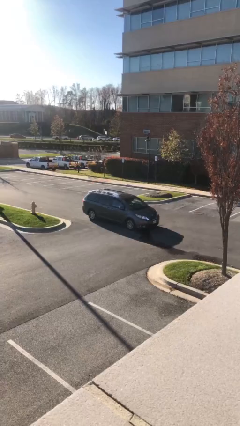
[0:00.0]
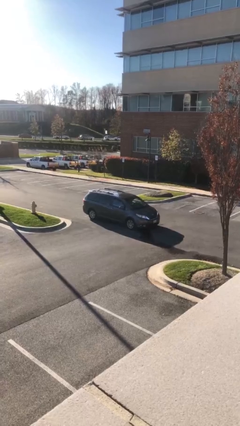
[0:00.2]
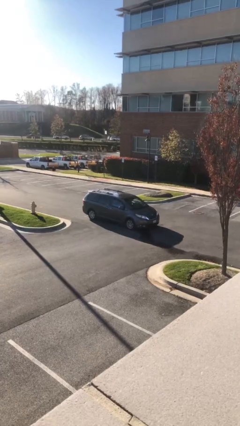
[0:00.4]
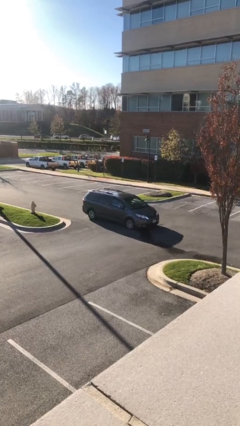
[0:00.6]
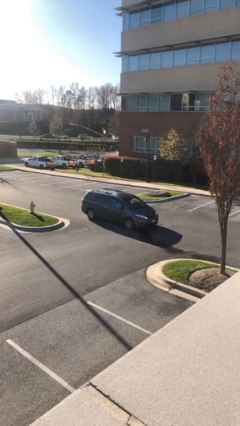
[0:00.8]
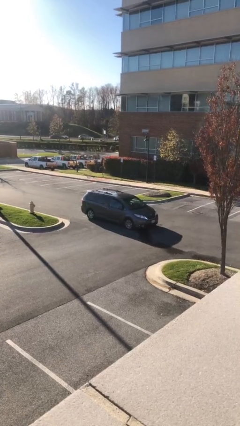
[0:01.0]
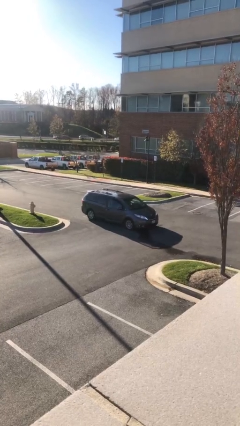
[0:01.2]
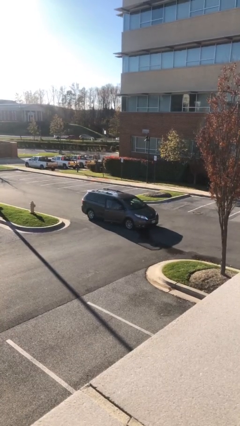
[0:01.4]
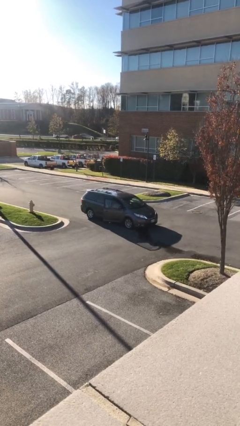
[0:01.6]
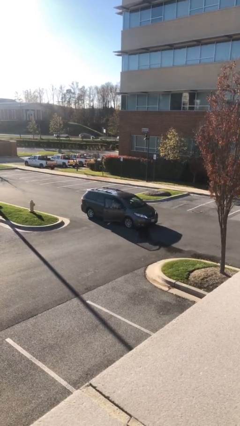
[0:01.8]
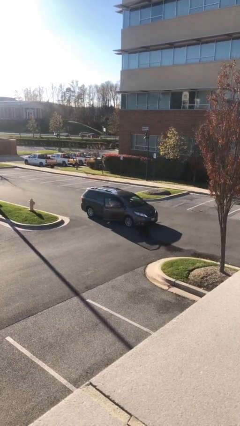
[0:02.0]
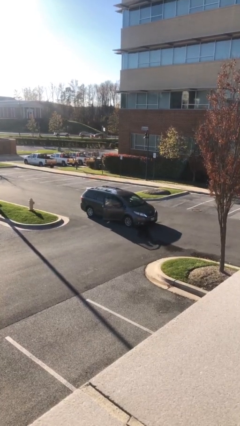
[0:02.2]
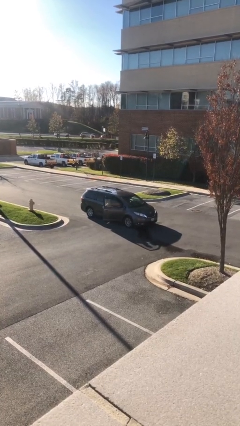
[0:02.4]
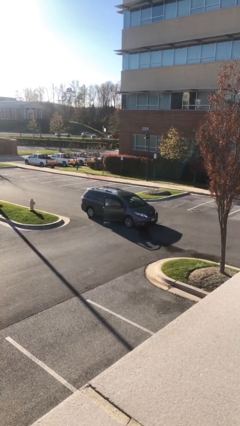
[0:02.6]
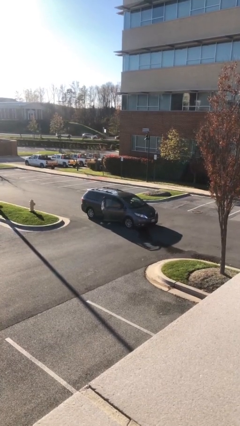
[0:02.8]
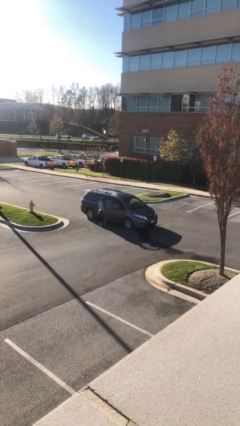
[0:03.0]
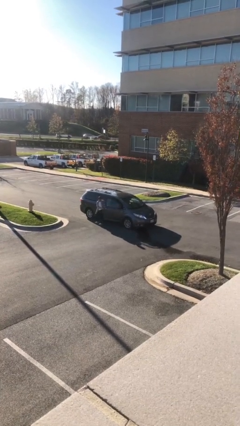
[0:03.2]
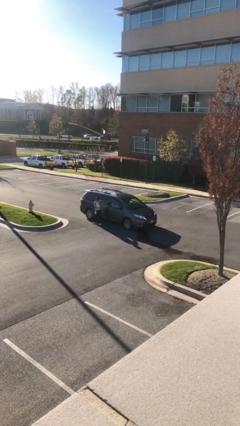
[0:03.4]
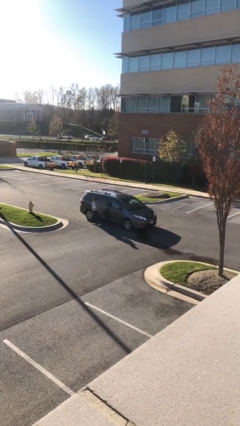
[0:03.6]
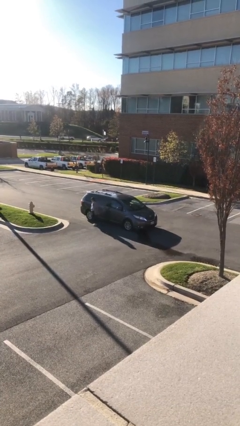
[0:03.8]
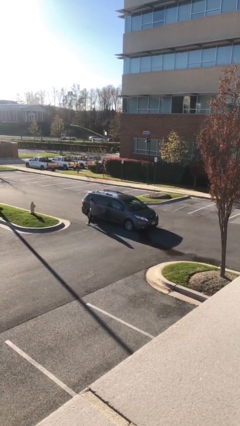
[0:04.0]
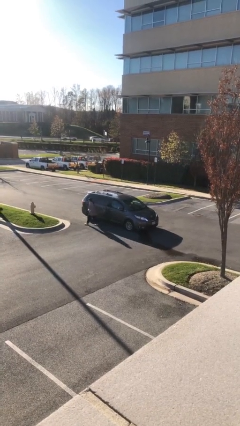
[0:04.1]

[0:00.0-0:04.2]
car drops off person

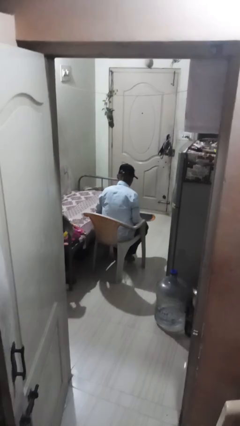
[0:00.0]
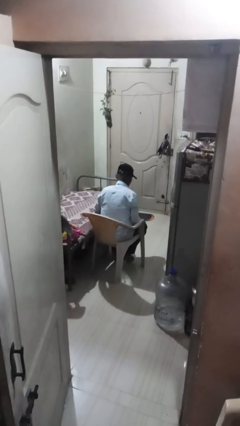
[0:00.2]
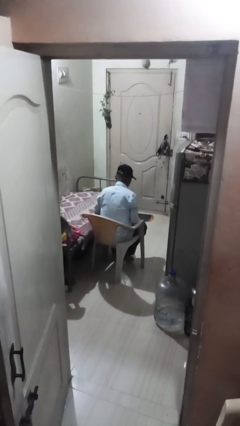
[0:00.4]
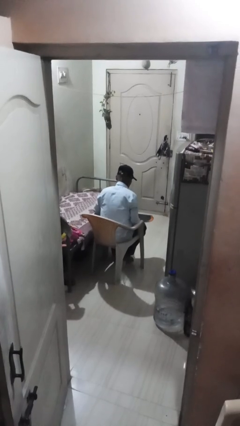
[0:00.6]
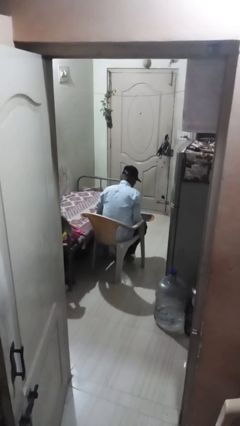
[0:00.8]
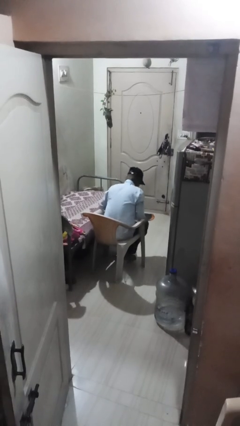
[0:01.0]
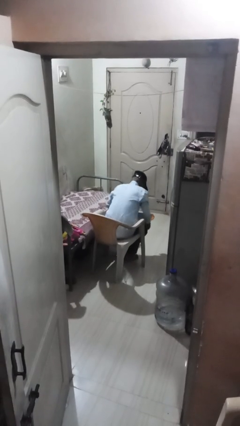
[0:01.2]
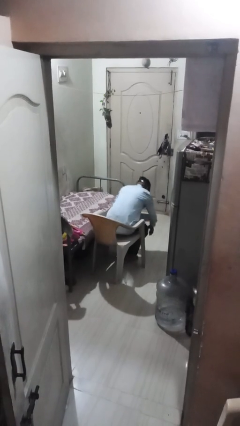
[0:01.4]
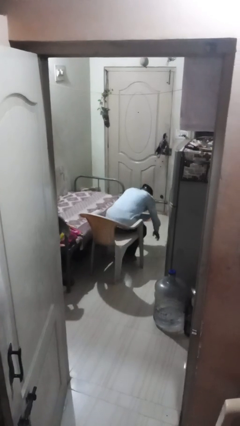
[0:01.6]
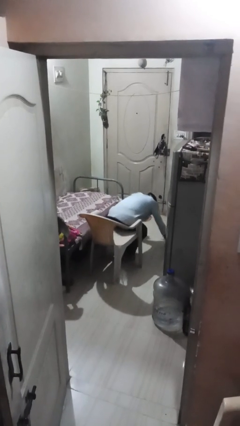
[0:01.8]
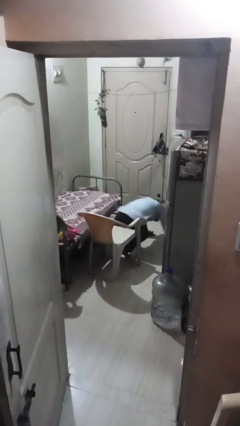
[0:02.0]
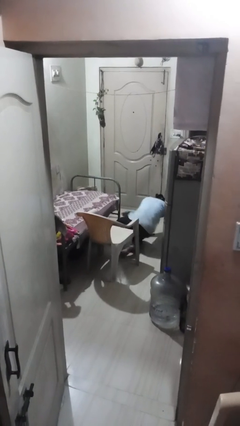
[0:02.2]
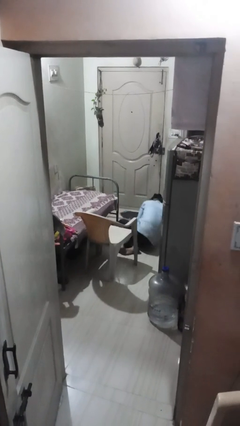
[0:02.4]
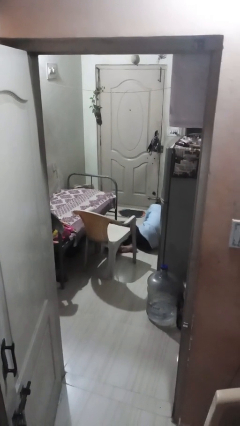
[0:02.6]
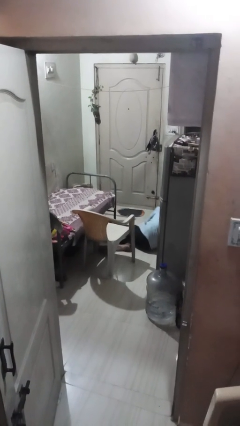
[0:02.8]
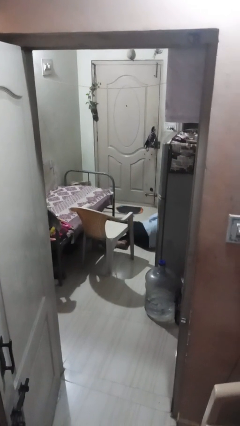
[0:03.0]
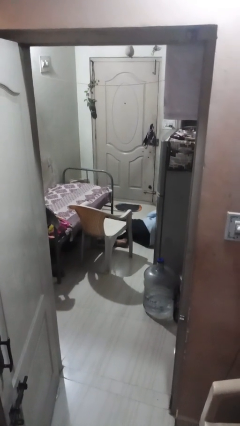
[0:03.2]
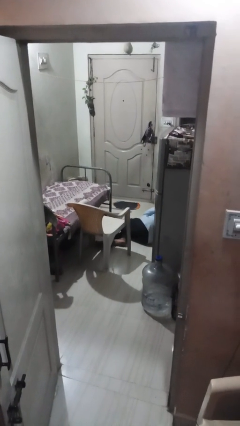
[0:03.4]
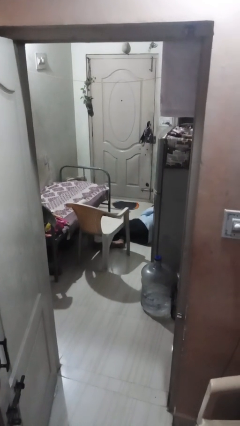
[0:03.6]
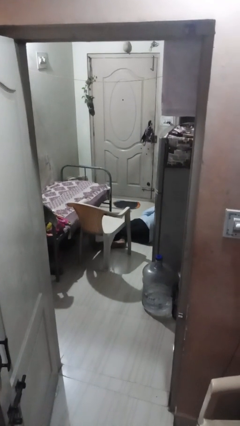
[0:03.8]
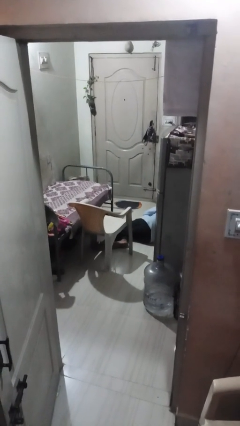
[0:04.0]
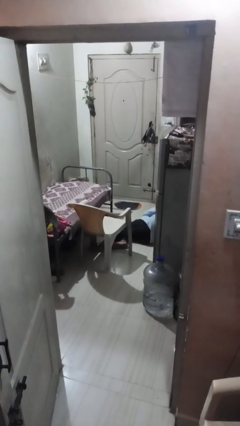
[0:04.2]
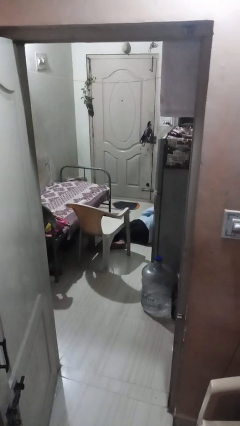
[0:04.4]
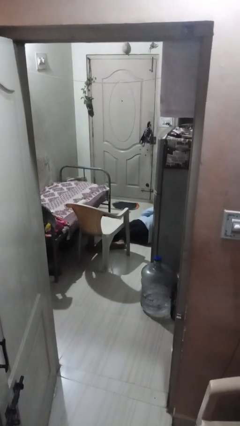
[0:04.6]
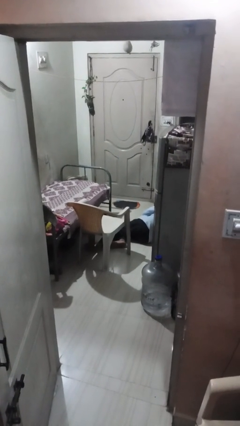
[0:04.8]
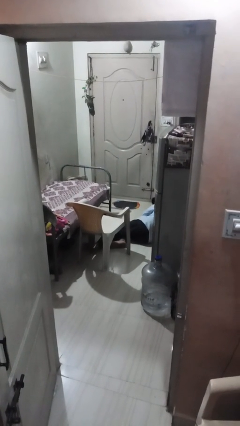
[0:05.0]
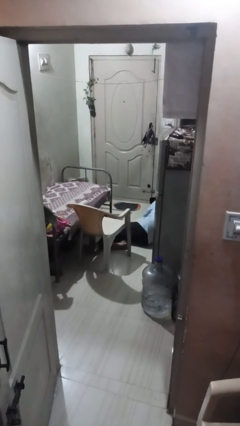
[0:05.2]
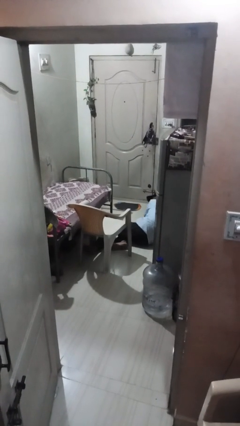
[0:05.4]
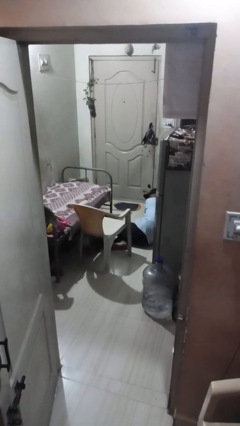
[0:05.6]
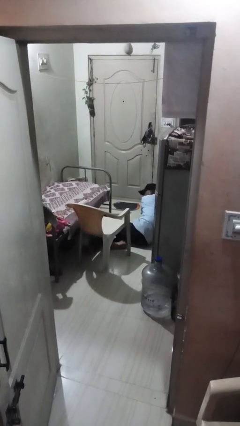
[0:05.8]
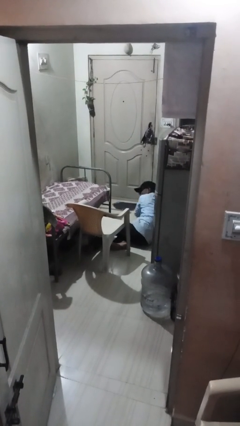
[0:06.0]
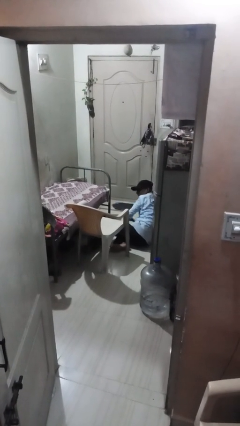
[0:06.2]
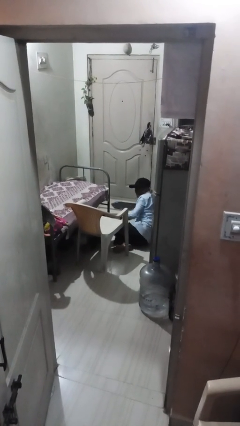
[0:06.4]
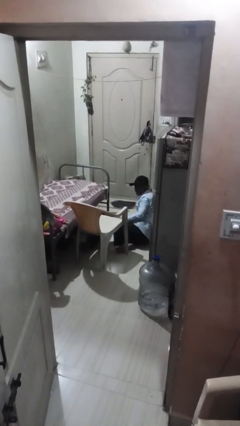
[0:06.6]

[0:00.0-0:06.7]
person falls from chair

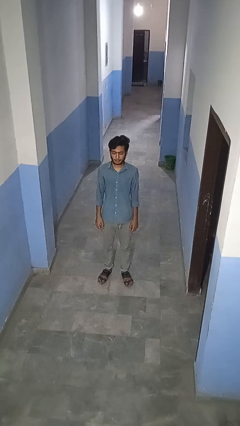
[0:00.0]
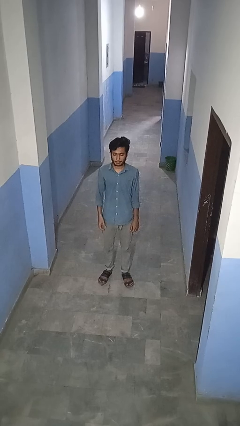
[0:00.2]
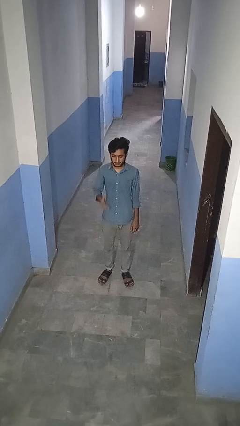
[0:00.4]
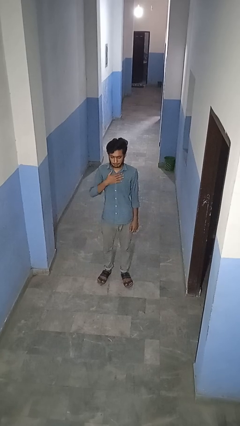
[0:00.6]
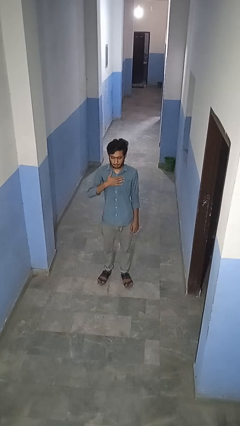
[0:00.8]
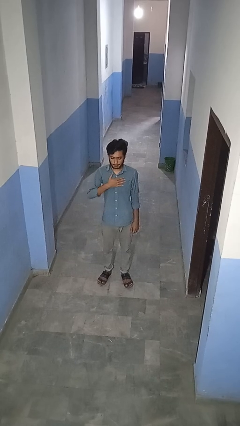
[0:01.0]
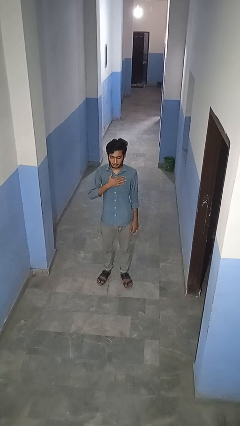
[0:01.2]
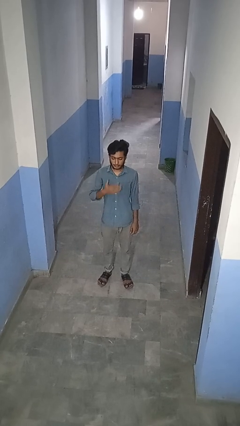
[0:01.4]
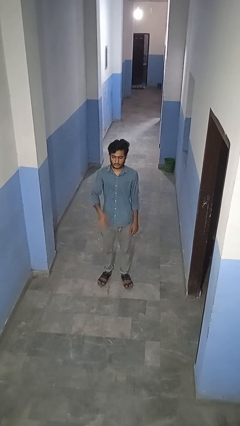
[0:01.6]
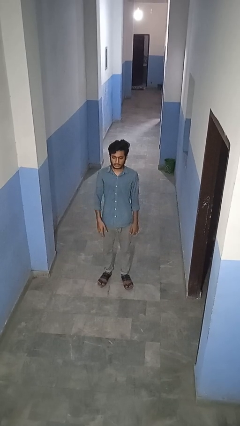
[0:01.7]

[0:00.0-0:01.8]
person drums on chest

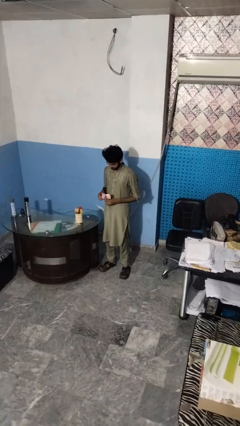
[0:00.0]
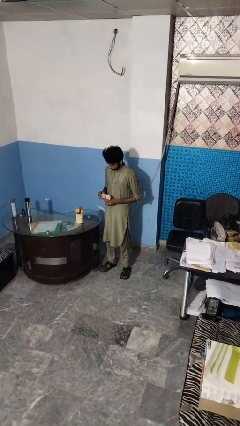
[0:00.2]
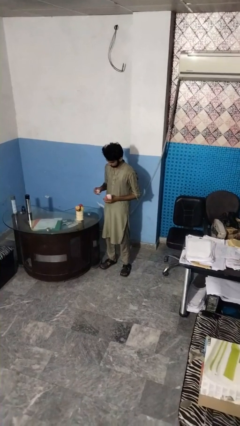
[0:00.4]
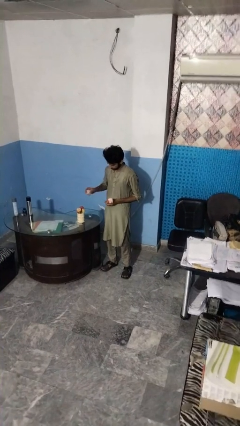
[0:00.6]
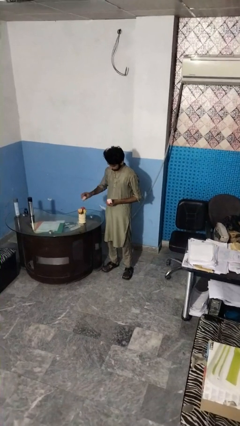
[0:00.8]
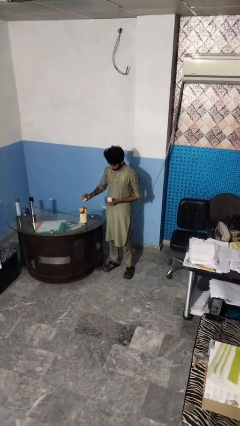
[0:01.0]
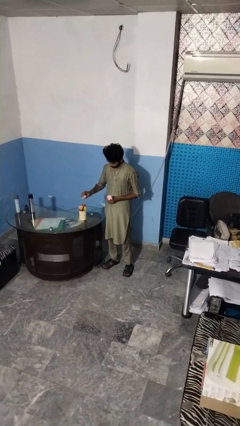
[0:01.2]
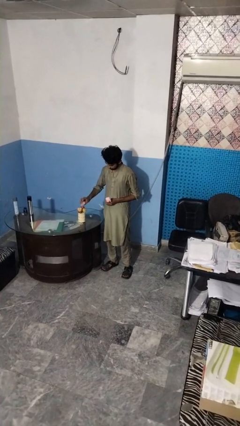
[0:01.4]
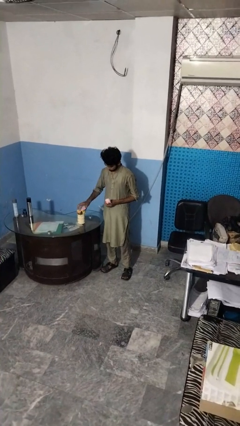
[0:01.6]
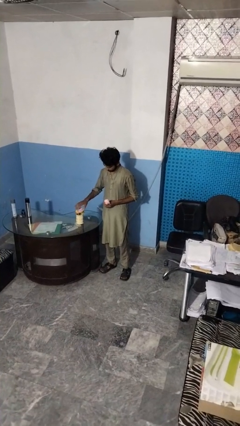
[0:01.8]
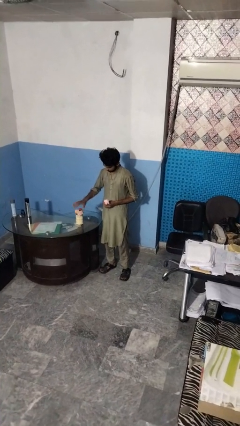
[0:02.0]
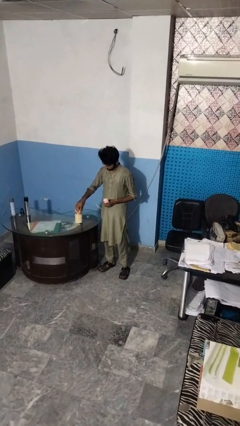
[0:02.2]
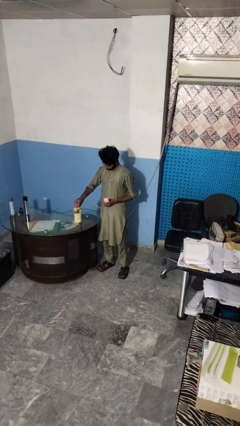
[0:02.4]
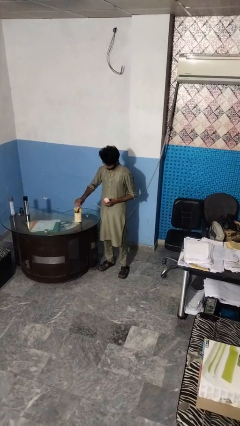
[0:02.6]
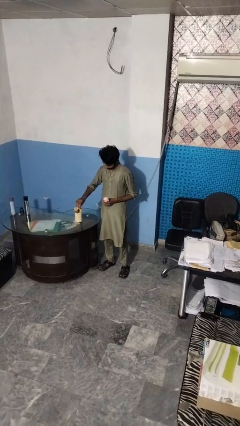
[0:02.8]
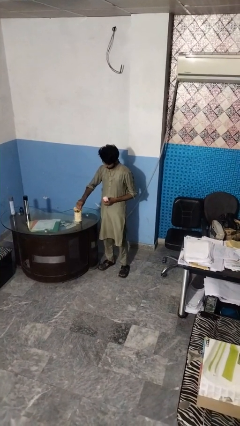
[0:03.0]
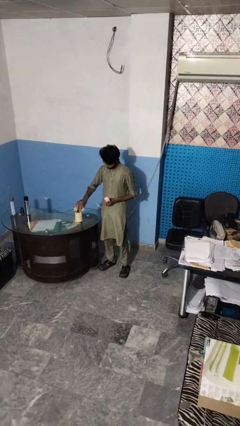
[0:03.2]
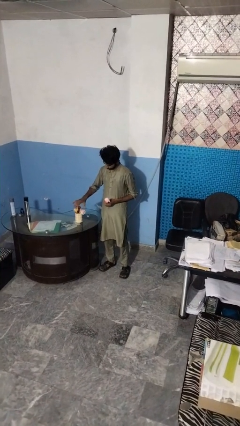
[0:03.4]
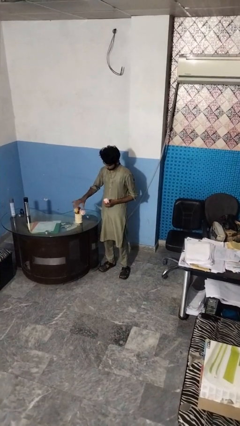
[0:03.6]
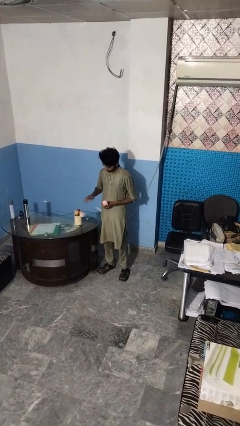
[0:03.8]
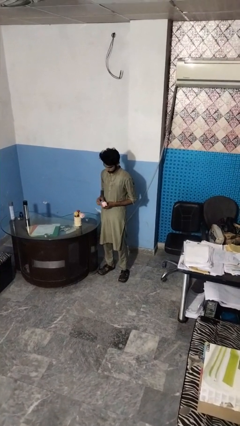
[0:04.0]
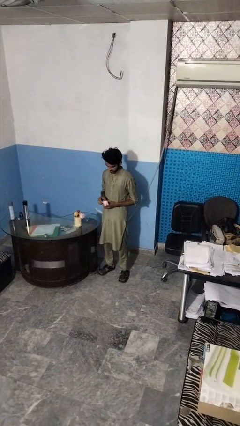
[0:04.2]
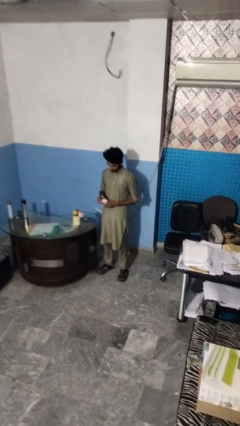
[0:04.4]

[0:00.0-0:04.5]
person arranges flowers in vase

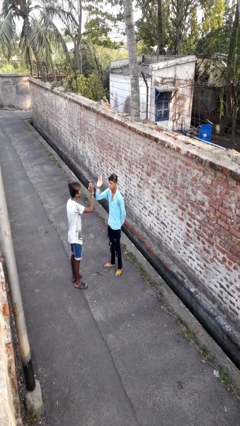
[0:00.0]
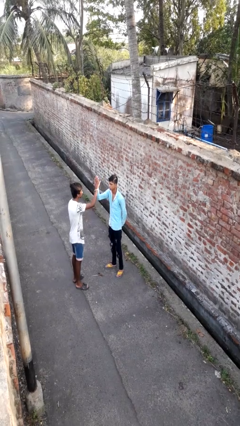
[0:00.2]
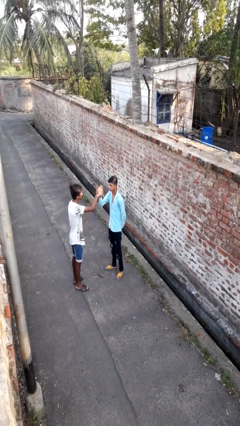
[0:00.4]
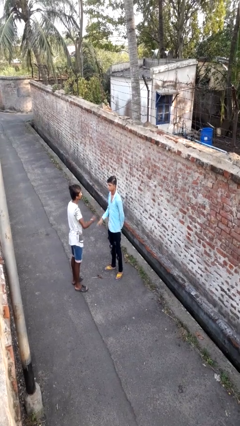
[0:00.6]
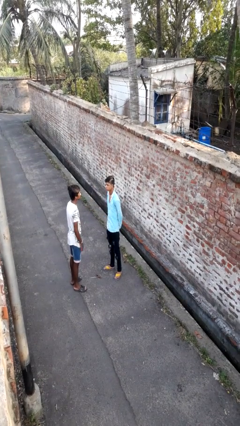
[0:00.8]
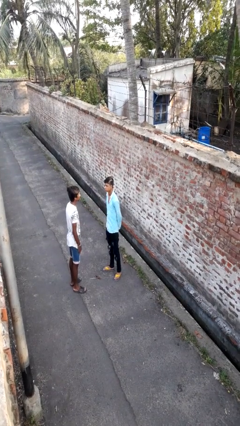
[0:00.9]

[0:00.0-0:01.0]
person highfives hand
